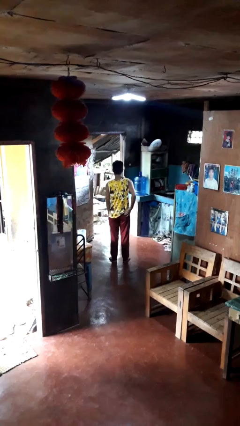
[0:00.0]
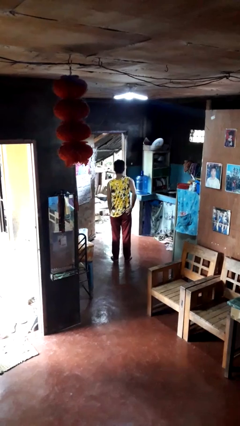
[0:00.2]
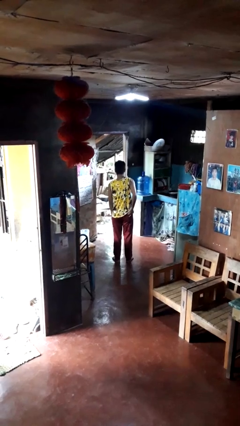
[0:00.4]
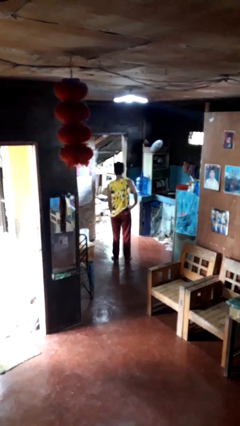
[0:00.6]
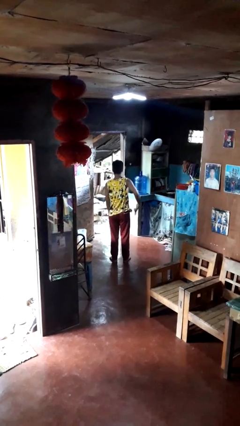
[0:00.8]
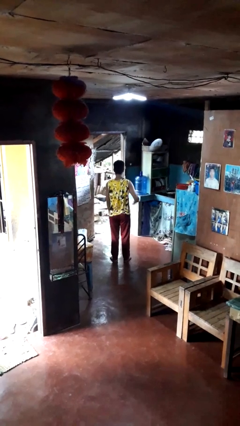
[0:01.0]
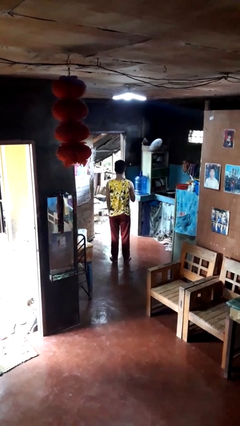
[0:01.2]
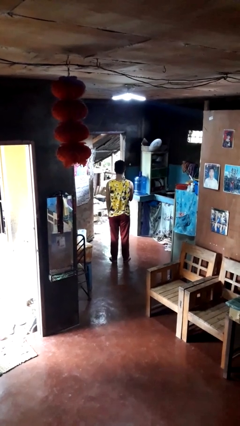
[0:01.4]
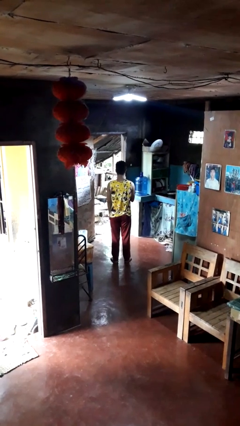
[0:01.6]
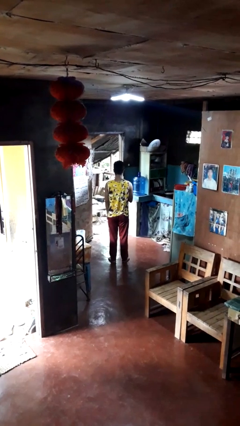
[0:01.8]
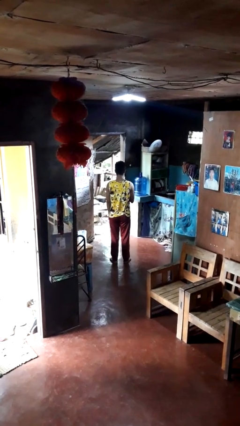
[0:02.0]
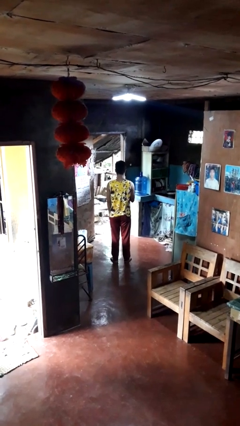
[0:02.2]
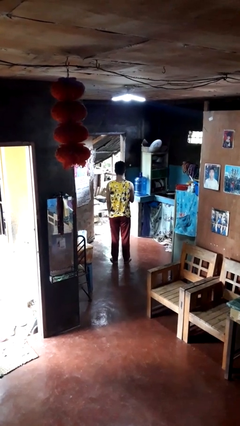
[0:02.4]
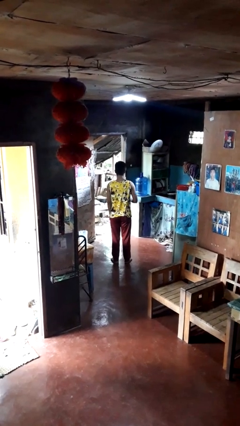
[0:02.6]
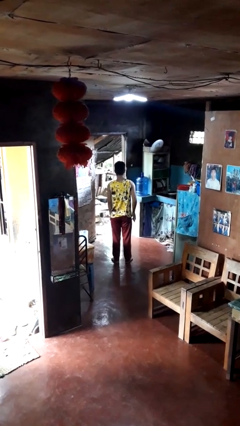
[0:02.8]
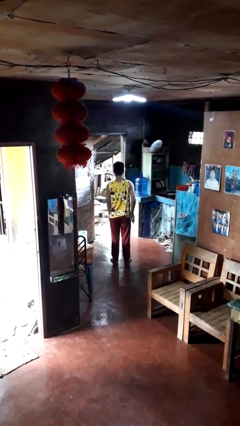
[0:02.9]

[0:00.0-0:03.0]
person takes phone from pocket

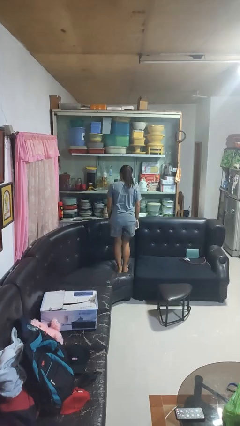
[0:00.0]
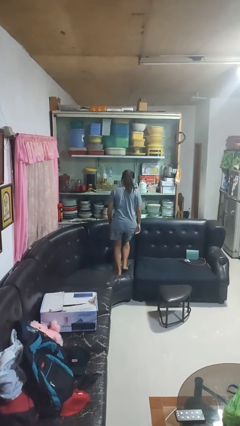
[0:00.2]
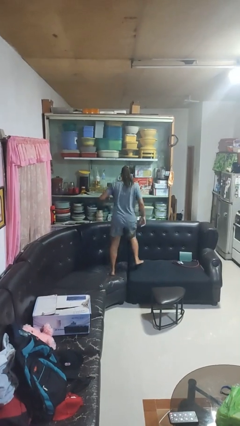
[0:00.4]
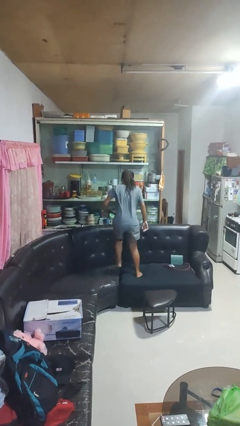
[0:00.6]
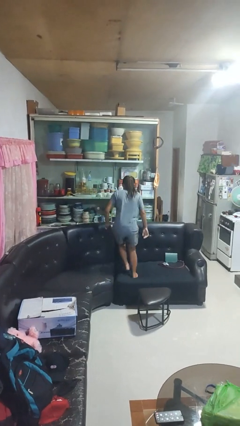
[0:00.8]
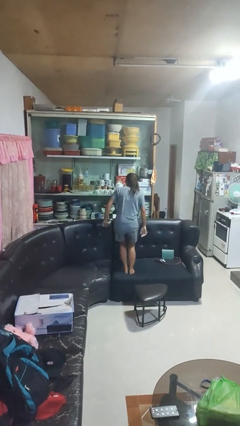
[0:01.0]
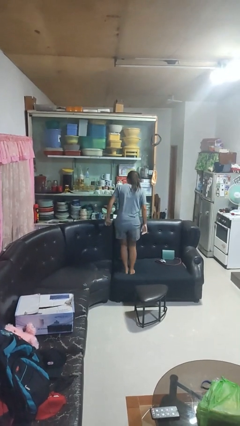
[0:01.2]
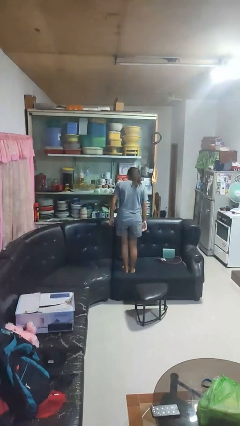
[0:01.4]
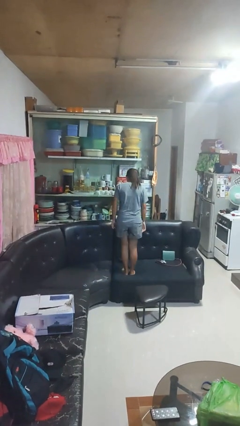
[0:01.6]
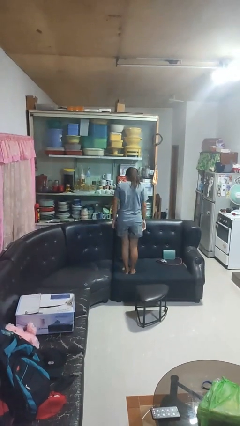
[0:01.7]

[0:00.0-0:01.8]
person jumps on couch

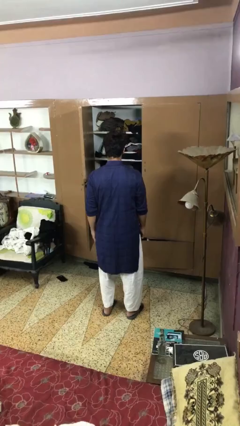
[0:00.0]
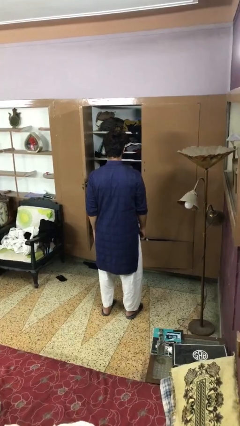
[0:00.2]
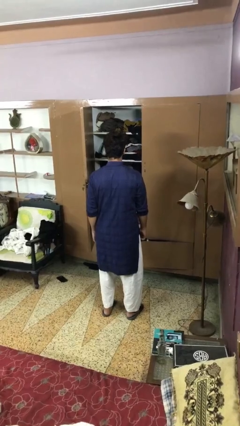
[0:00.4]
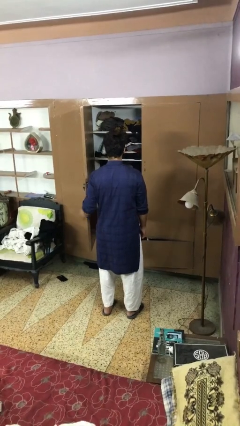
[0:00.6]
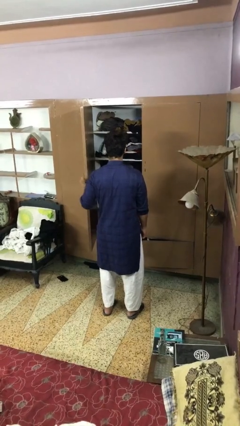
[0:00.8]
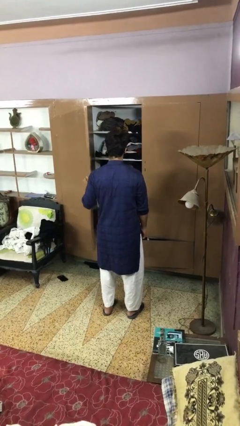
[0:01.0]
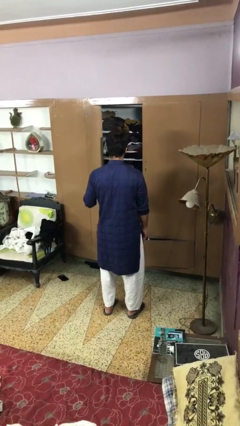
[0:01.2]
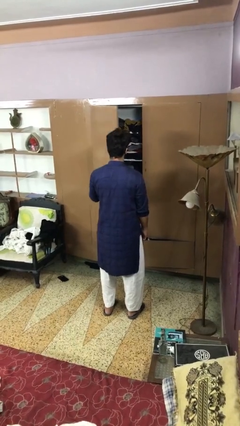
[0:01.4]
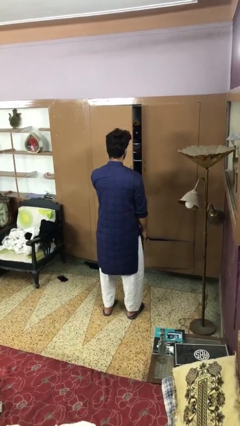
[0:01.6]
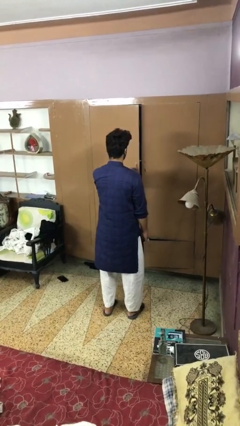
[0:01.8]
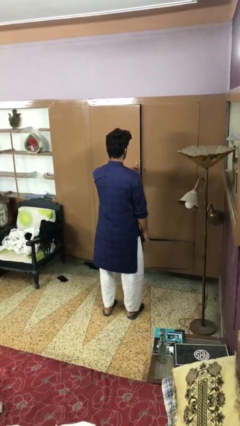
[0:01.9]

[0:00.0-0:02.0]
person closes closet door

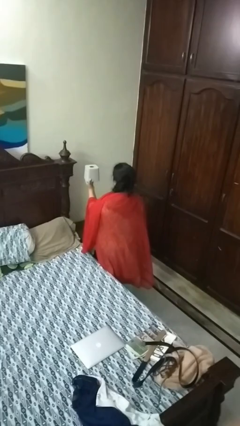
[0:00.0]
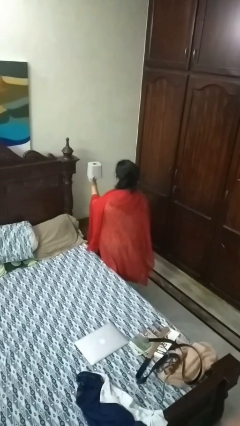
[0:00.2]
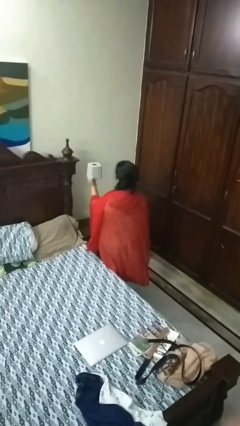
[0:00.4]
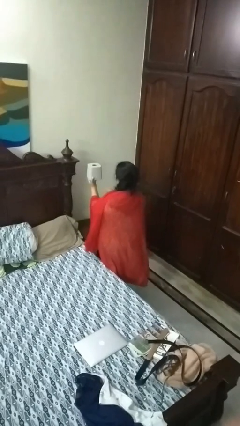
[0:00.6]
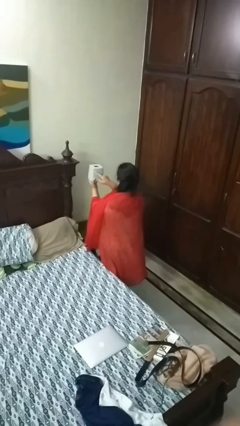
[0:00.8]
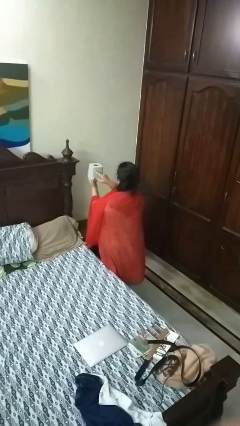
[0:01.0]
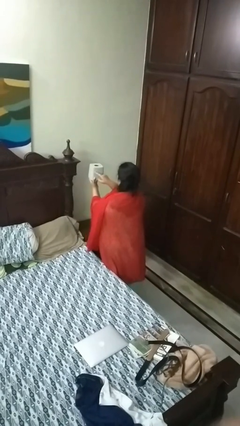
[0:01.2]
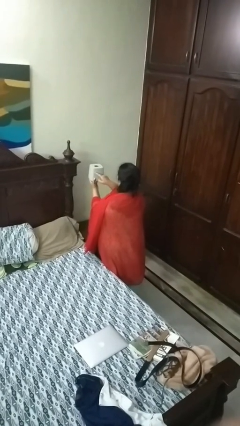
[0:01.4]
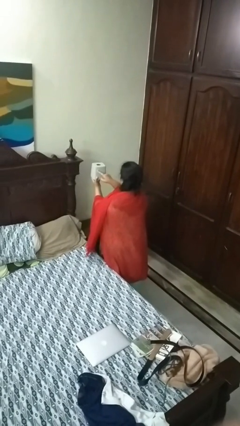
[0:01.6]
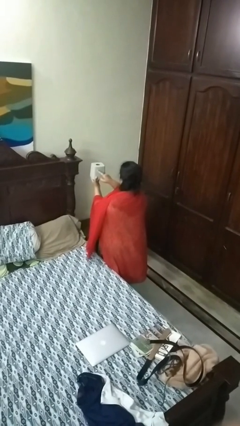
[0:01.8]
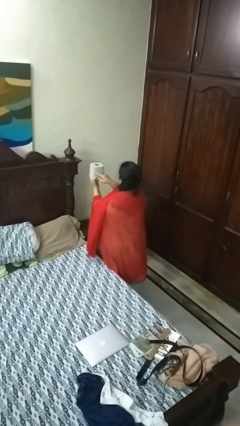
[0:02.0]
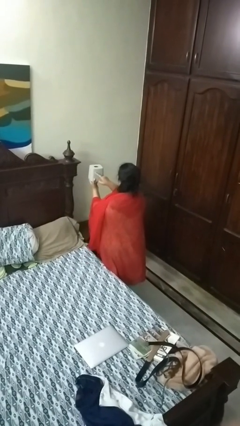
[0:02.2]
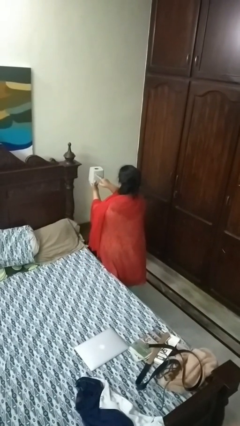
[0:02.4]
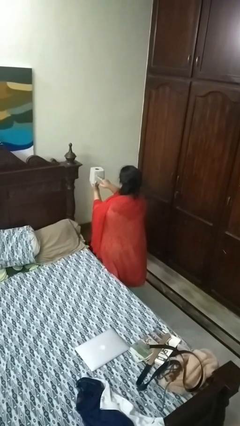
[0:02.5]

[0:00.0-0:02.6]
person taps object with finger

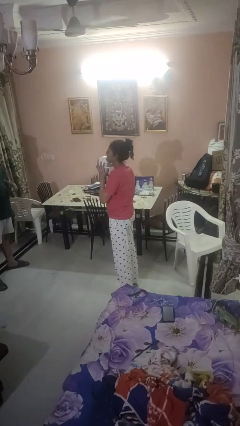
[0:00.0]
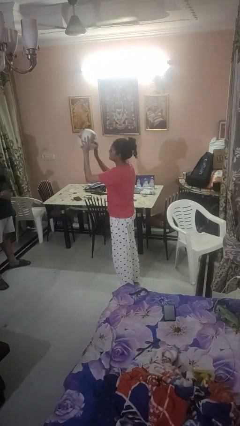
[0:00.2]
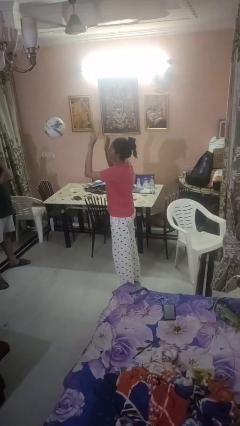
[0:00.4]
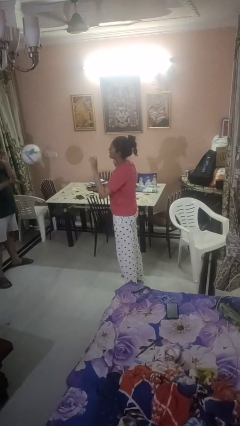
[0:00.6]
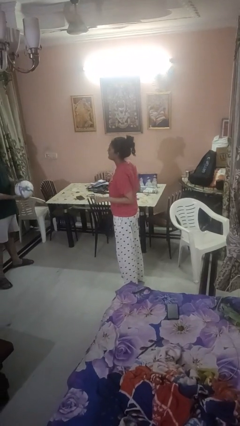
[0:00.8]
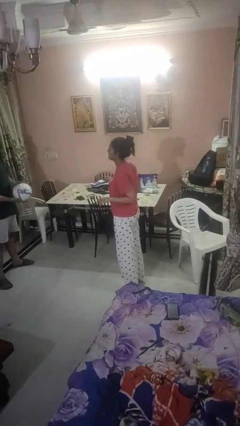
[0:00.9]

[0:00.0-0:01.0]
person throws object to person

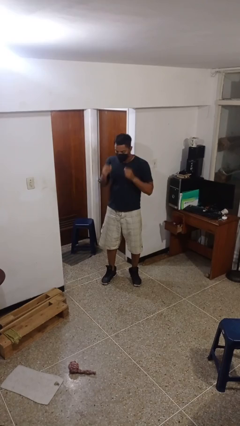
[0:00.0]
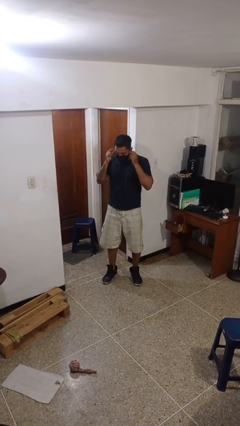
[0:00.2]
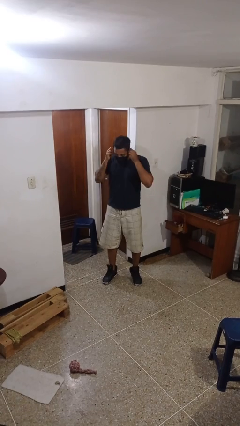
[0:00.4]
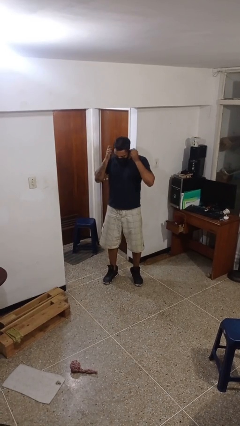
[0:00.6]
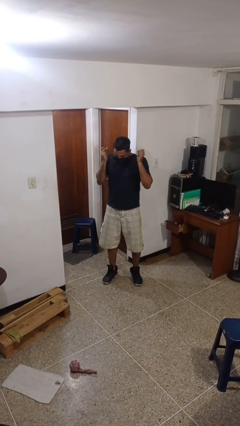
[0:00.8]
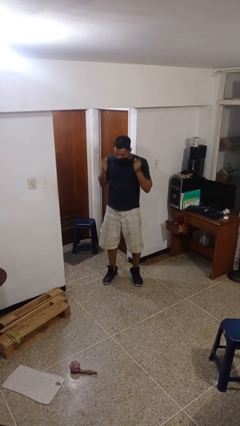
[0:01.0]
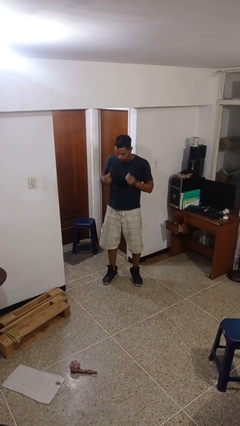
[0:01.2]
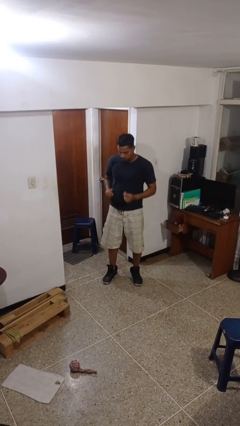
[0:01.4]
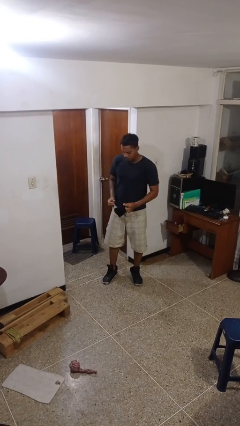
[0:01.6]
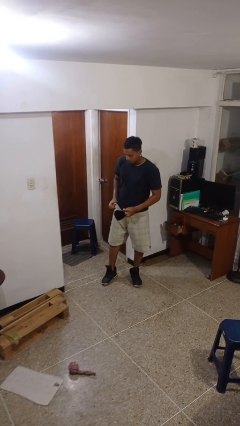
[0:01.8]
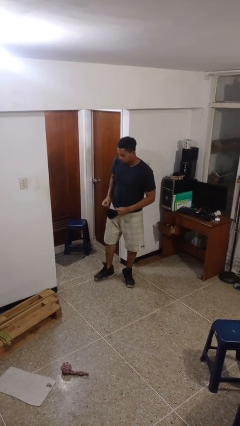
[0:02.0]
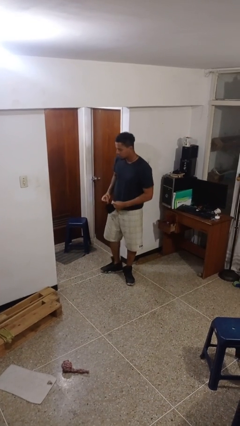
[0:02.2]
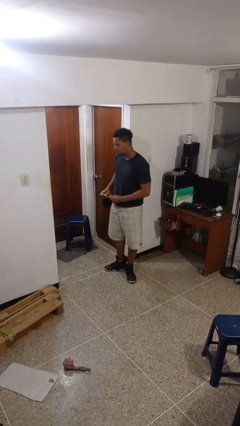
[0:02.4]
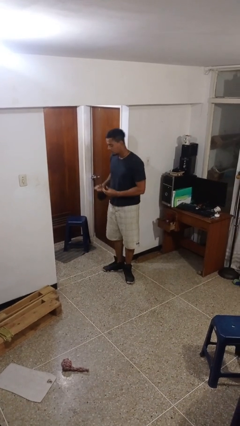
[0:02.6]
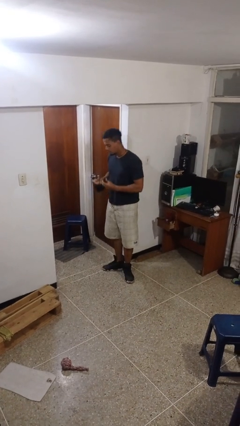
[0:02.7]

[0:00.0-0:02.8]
person takes off facemask

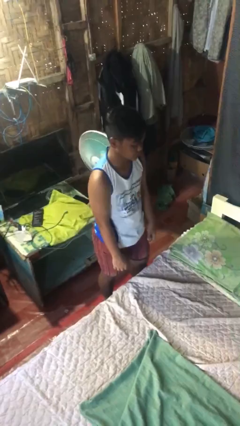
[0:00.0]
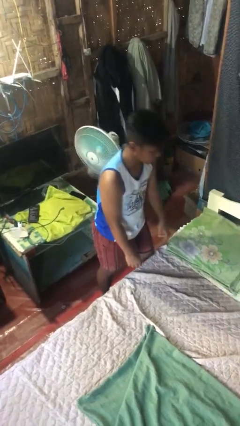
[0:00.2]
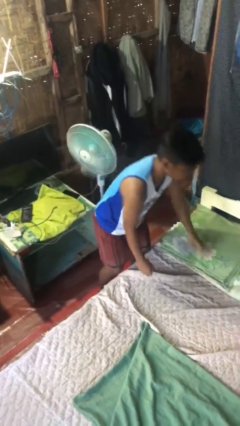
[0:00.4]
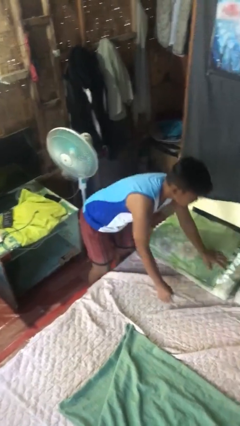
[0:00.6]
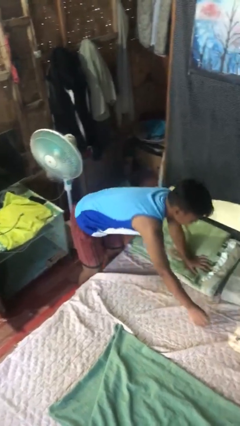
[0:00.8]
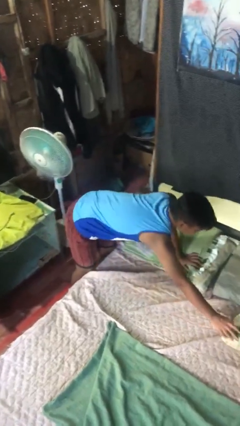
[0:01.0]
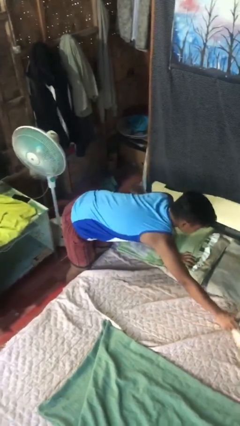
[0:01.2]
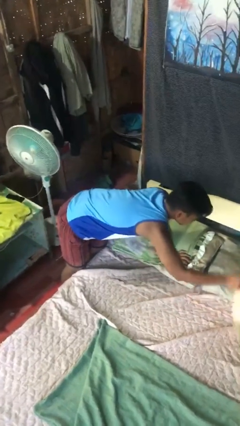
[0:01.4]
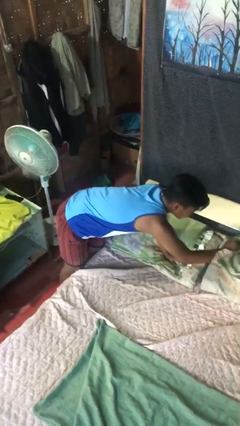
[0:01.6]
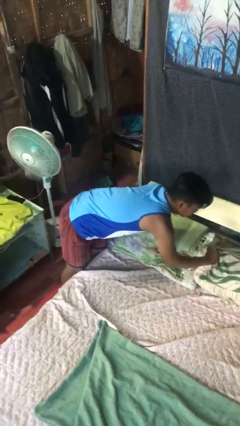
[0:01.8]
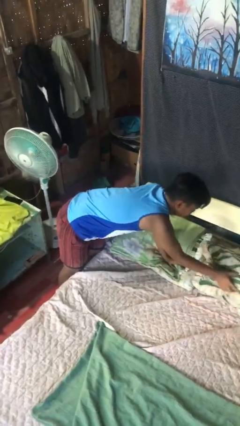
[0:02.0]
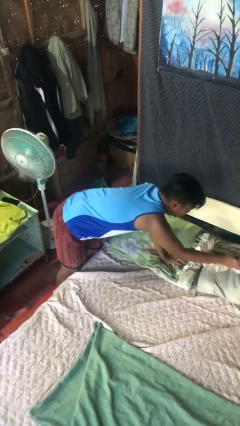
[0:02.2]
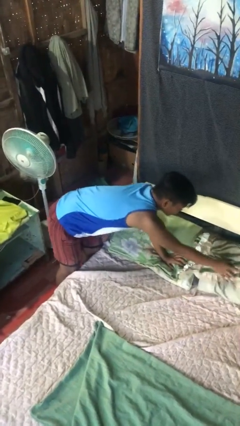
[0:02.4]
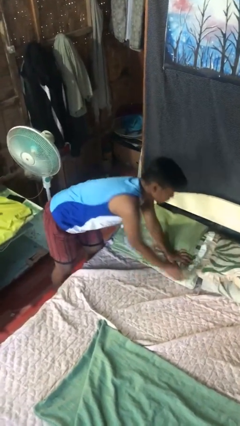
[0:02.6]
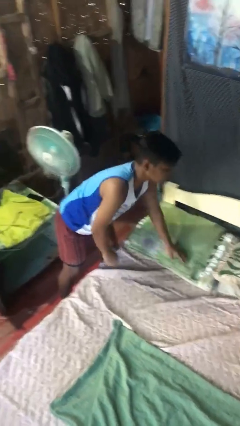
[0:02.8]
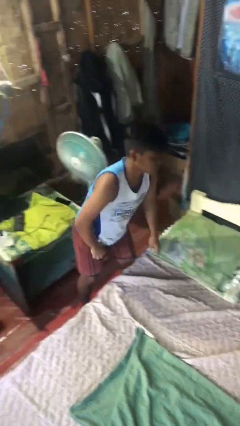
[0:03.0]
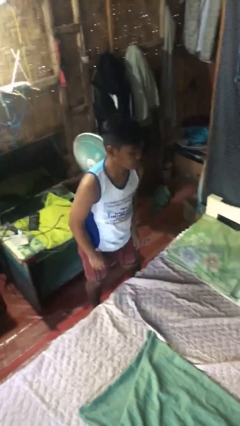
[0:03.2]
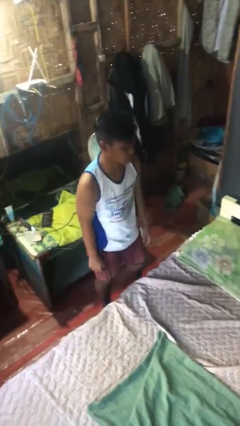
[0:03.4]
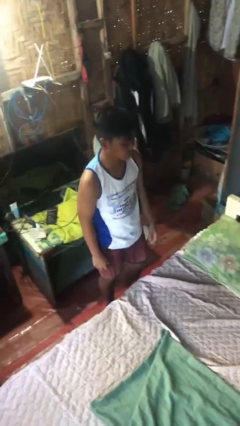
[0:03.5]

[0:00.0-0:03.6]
person makes bed

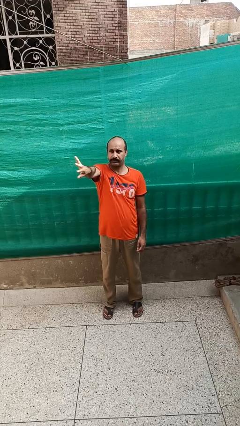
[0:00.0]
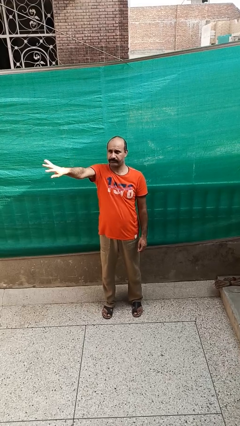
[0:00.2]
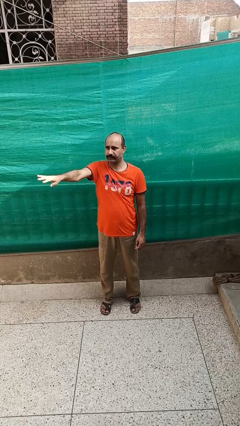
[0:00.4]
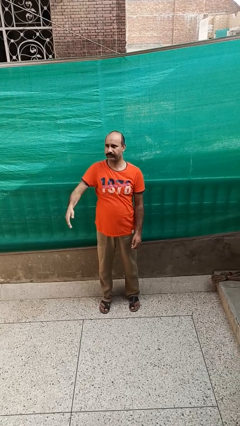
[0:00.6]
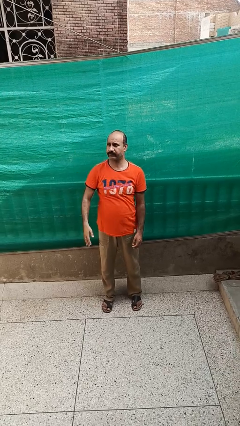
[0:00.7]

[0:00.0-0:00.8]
person gestures swipe right
